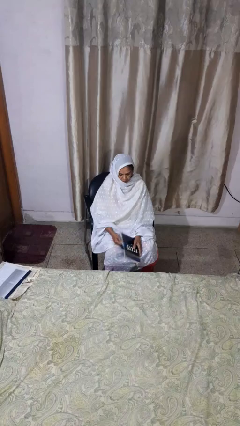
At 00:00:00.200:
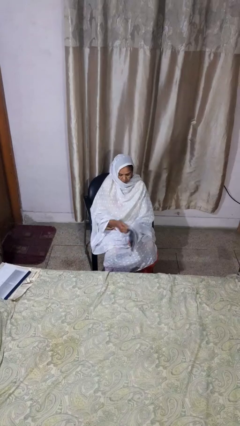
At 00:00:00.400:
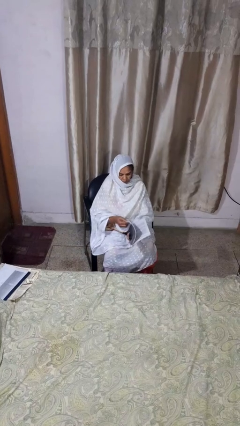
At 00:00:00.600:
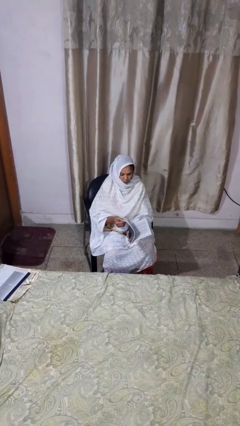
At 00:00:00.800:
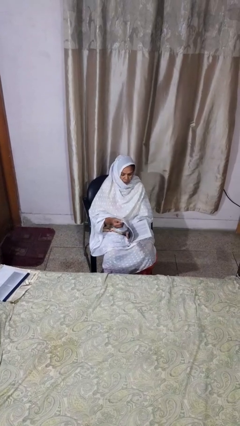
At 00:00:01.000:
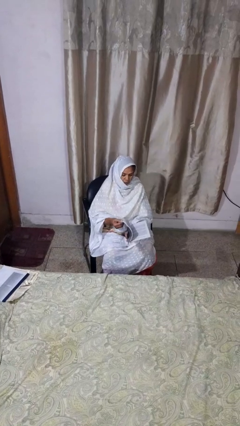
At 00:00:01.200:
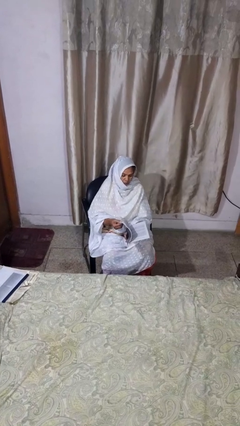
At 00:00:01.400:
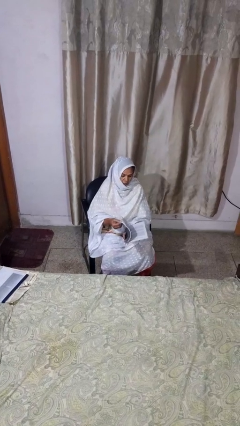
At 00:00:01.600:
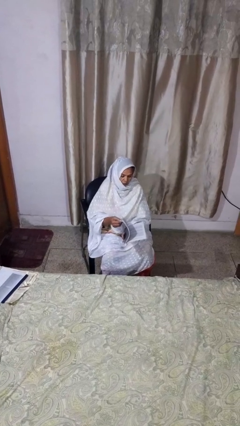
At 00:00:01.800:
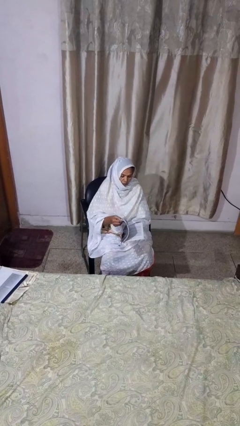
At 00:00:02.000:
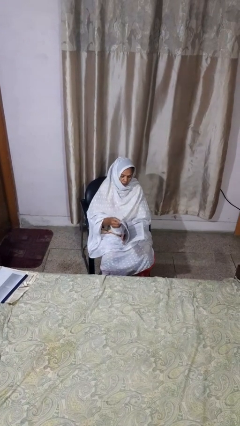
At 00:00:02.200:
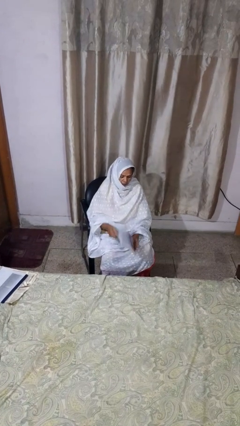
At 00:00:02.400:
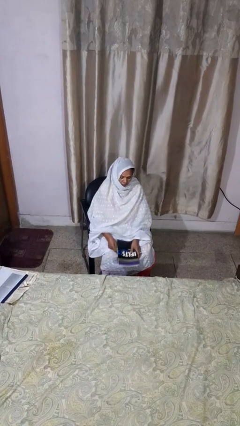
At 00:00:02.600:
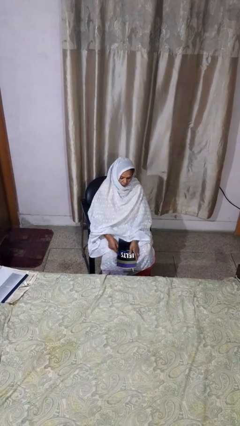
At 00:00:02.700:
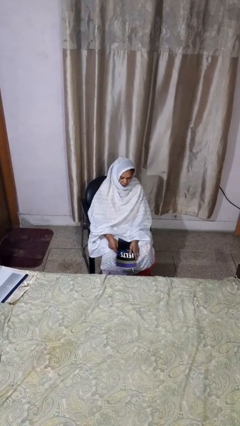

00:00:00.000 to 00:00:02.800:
person reads book

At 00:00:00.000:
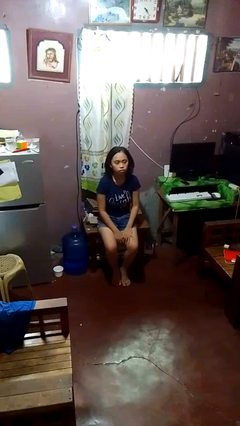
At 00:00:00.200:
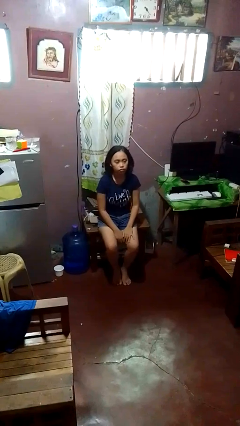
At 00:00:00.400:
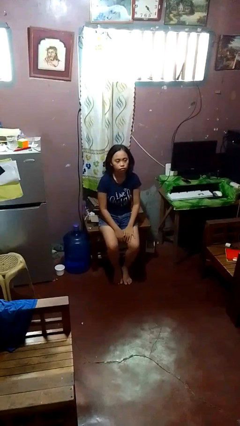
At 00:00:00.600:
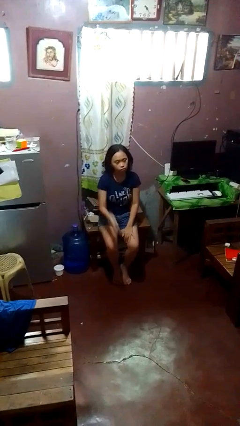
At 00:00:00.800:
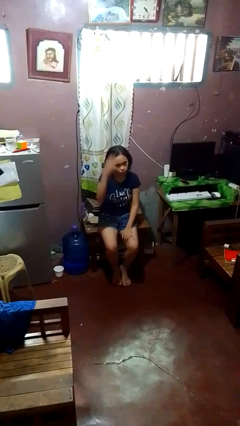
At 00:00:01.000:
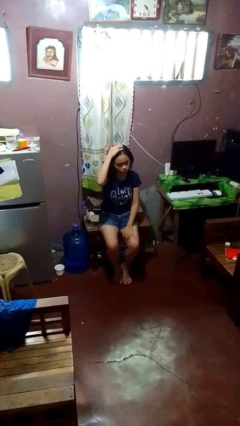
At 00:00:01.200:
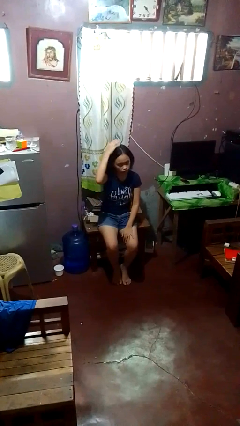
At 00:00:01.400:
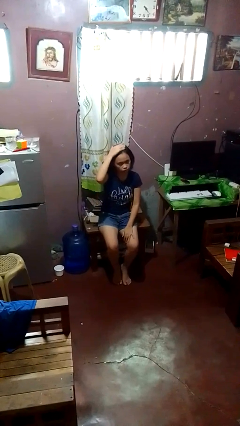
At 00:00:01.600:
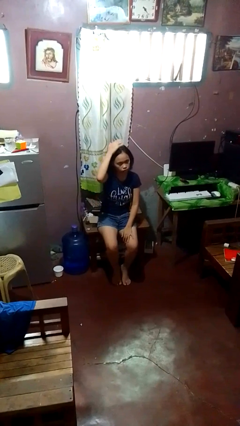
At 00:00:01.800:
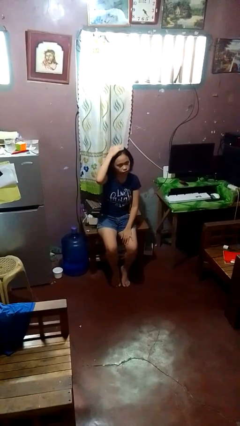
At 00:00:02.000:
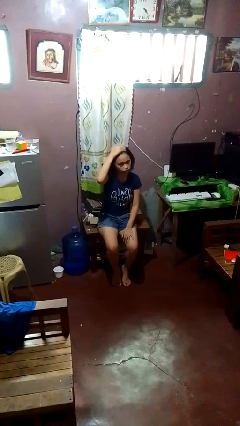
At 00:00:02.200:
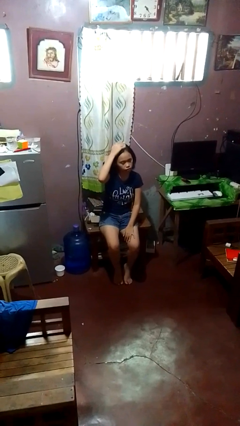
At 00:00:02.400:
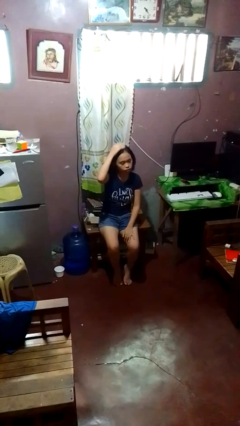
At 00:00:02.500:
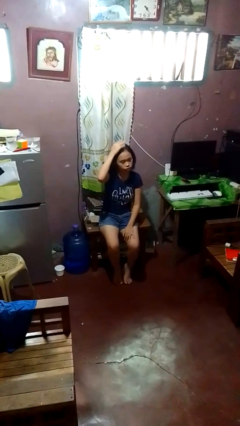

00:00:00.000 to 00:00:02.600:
person pats head

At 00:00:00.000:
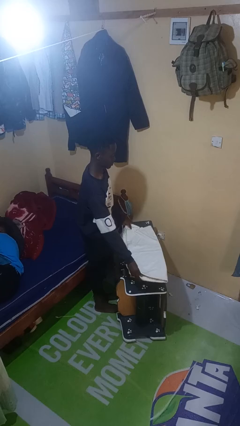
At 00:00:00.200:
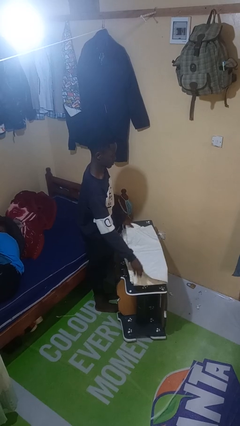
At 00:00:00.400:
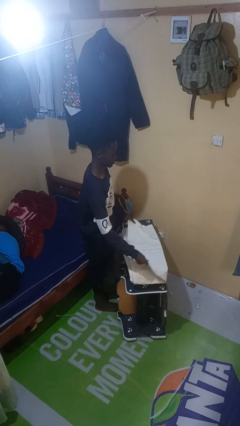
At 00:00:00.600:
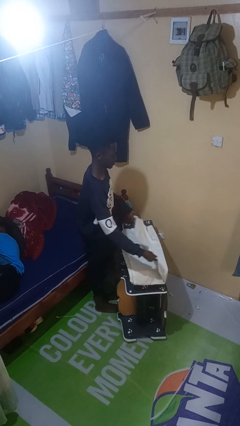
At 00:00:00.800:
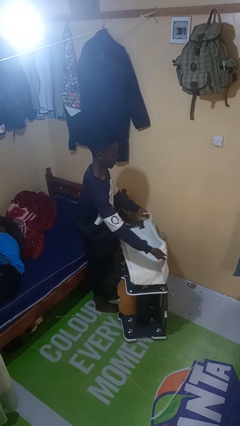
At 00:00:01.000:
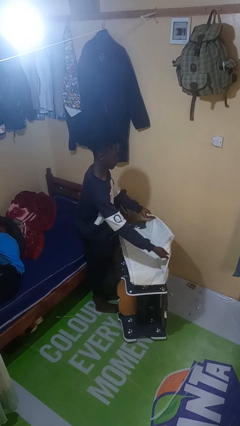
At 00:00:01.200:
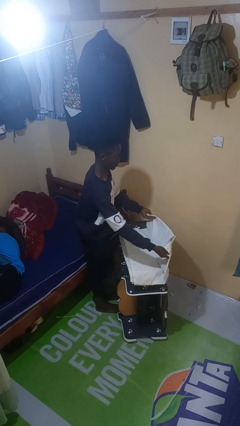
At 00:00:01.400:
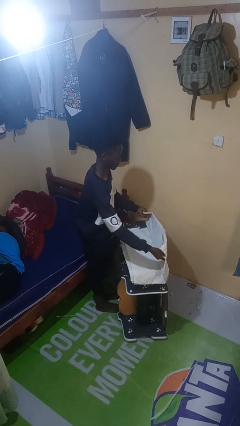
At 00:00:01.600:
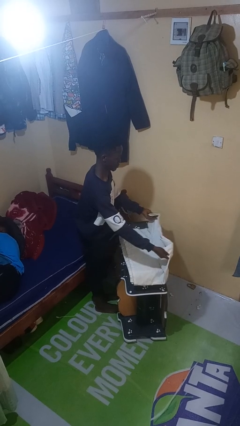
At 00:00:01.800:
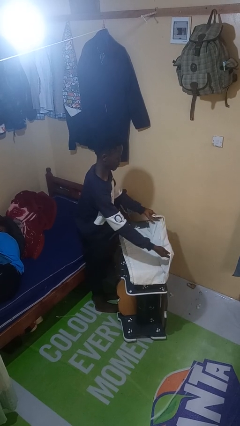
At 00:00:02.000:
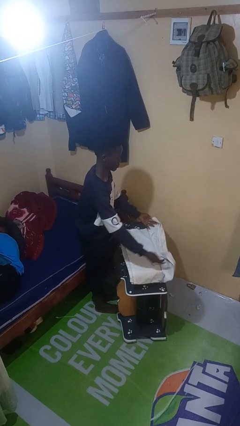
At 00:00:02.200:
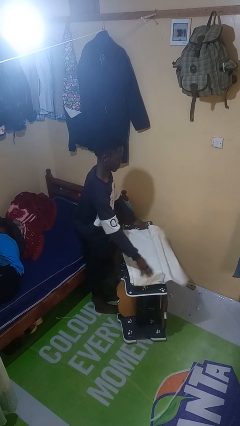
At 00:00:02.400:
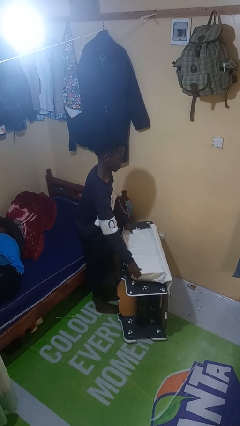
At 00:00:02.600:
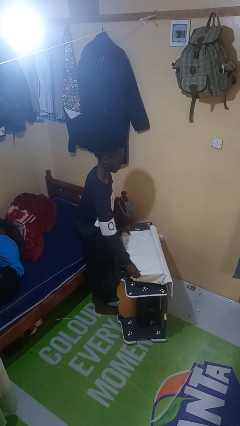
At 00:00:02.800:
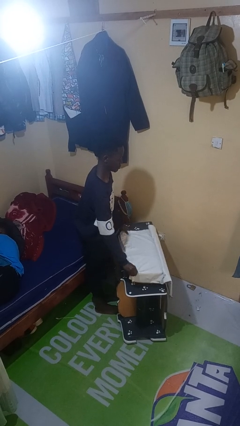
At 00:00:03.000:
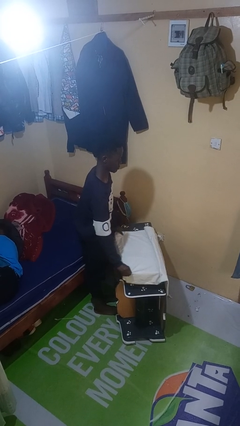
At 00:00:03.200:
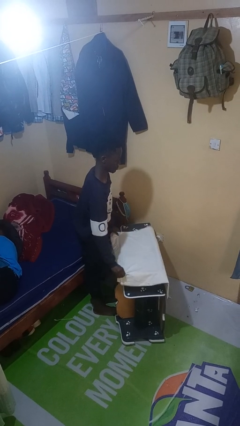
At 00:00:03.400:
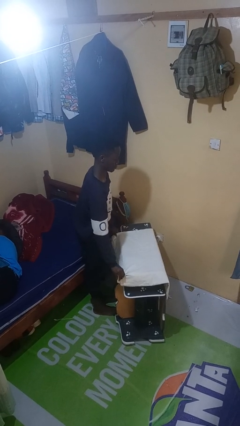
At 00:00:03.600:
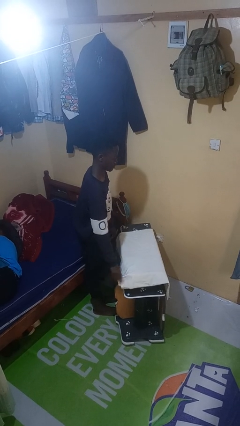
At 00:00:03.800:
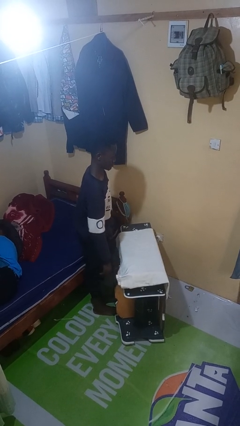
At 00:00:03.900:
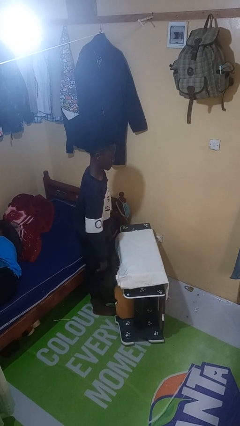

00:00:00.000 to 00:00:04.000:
person spreads tablecloth

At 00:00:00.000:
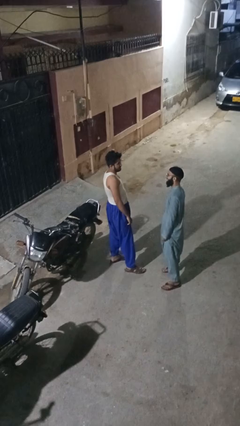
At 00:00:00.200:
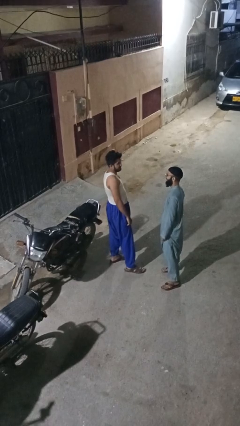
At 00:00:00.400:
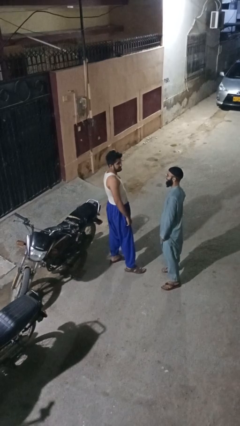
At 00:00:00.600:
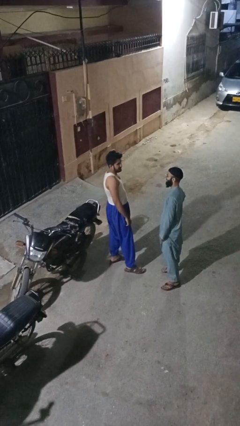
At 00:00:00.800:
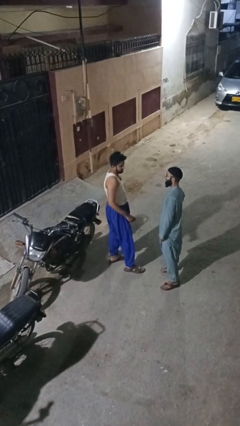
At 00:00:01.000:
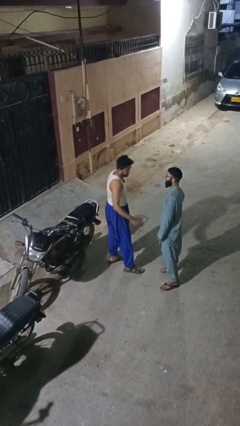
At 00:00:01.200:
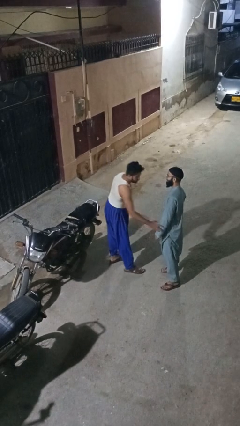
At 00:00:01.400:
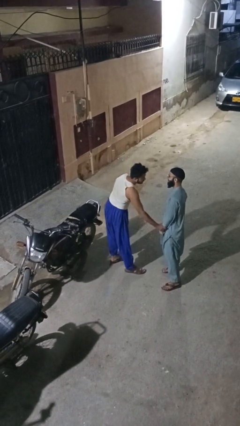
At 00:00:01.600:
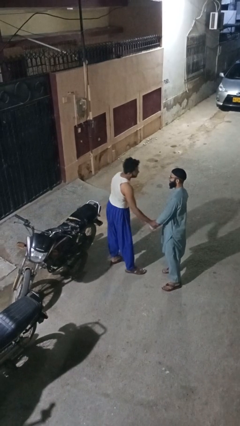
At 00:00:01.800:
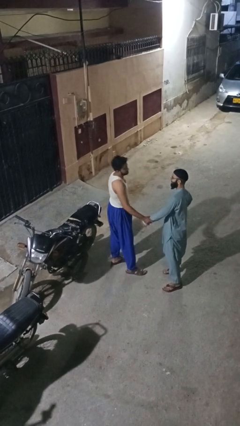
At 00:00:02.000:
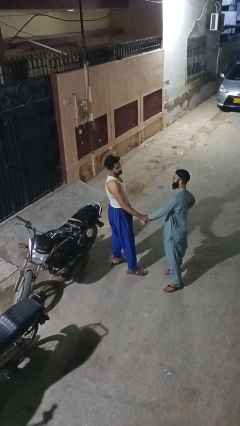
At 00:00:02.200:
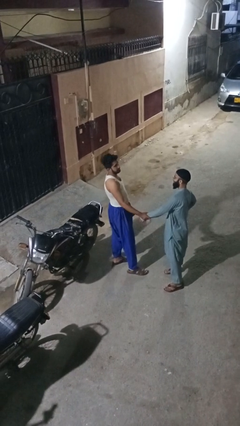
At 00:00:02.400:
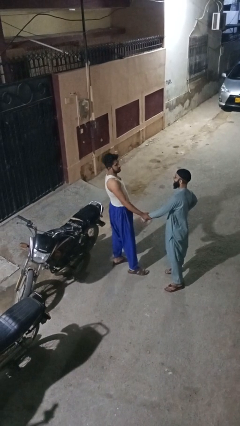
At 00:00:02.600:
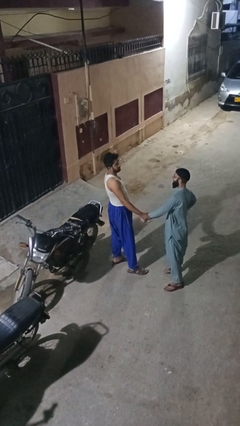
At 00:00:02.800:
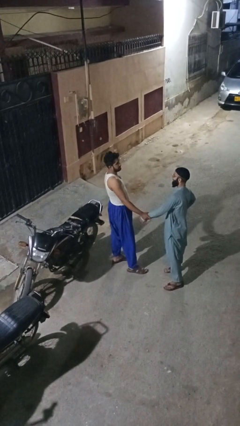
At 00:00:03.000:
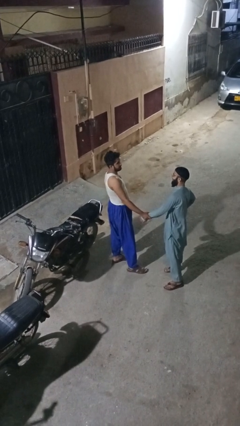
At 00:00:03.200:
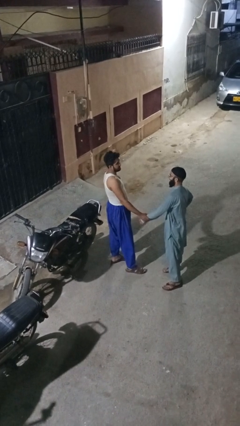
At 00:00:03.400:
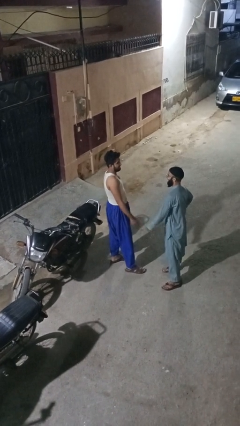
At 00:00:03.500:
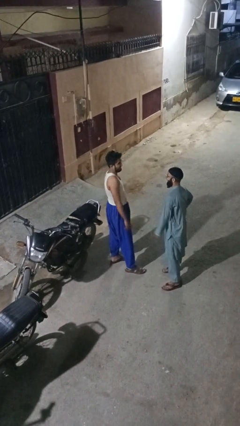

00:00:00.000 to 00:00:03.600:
person grabs person by forearm

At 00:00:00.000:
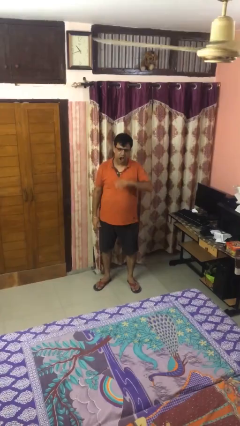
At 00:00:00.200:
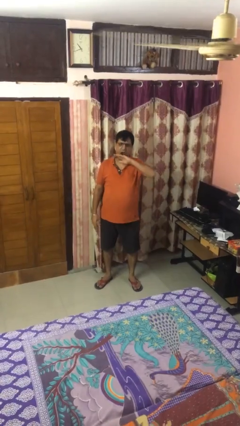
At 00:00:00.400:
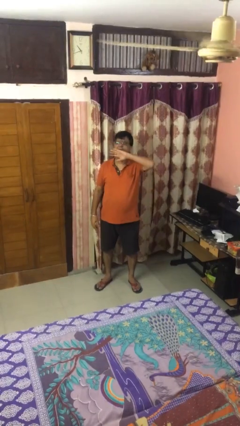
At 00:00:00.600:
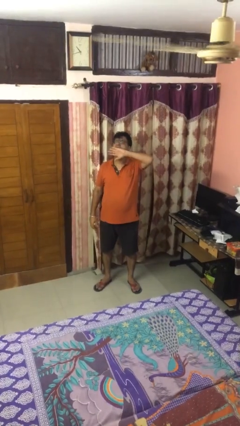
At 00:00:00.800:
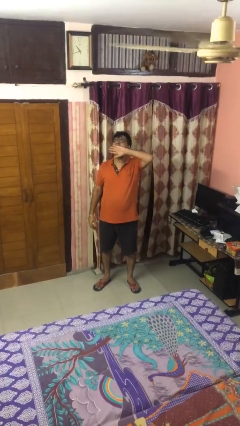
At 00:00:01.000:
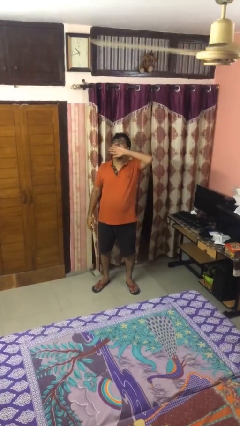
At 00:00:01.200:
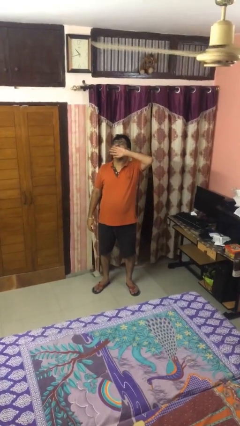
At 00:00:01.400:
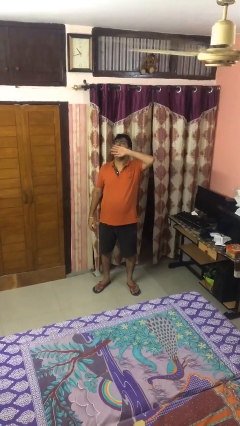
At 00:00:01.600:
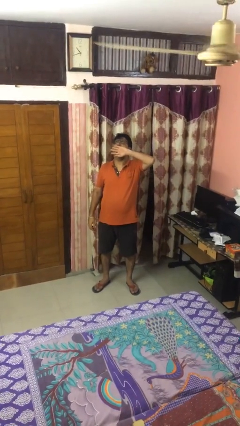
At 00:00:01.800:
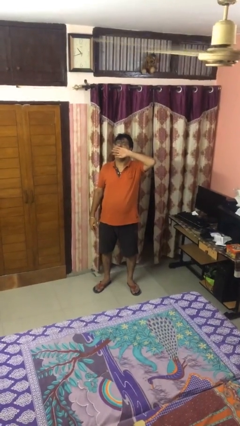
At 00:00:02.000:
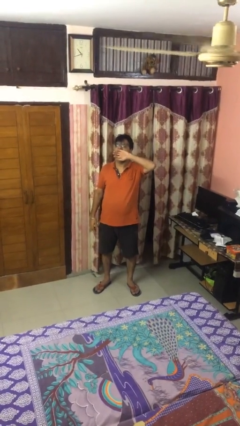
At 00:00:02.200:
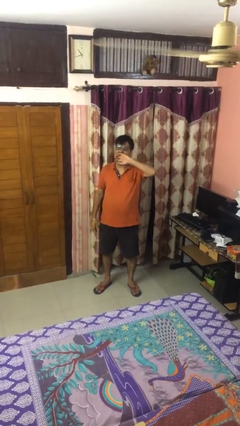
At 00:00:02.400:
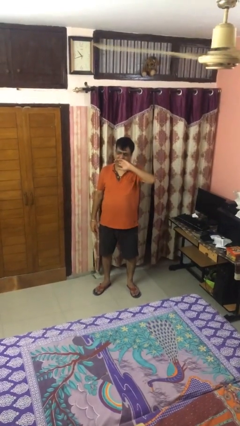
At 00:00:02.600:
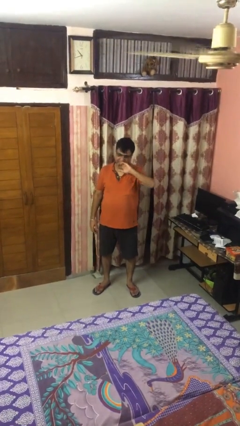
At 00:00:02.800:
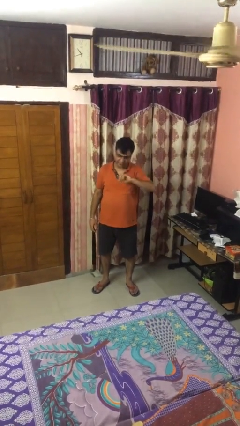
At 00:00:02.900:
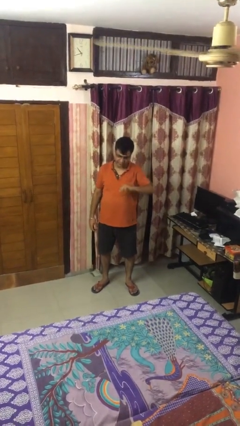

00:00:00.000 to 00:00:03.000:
person yawns

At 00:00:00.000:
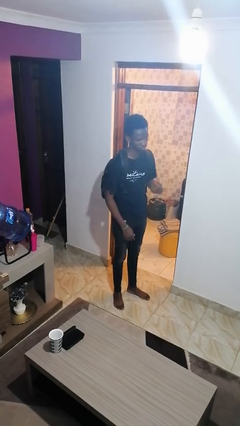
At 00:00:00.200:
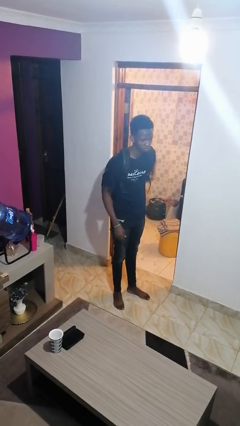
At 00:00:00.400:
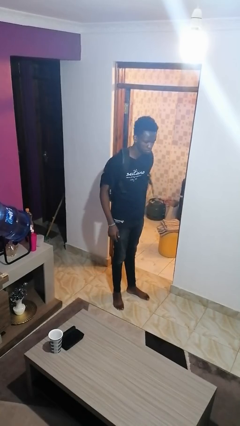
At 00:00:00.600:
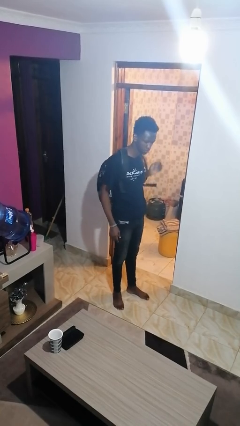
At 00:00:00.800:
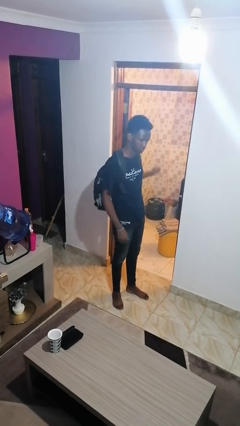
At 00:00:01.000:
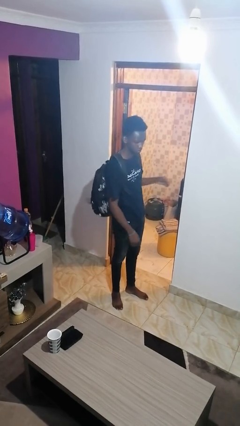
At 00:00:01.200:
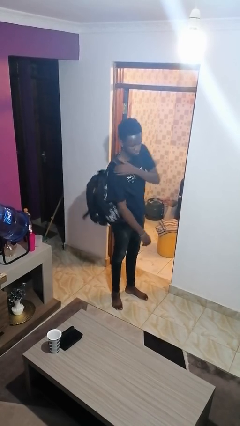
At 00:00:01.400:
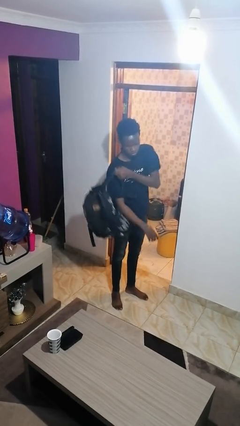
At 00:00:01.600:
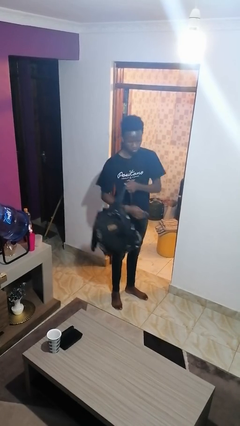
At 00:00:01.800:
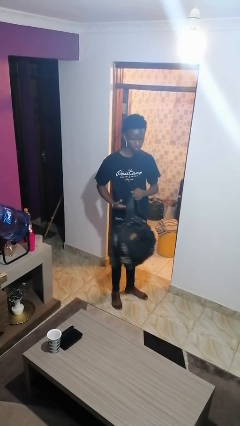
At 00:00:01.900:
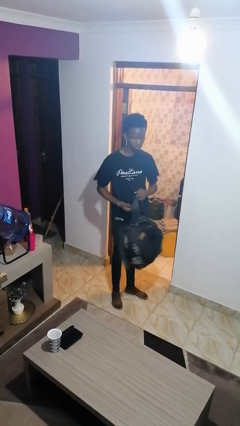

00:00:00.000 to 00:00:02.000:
person takes off backpack
